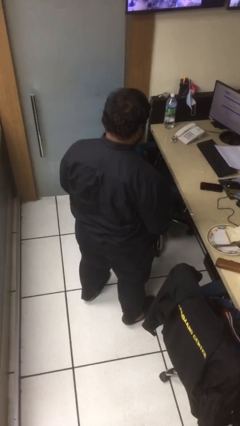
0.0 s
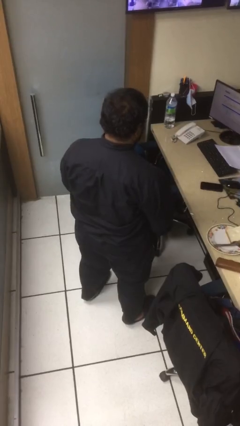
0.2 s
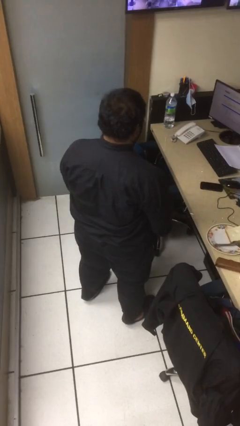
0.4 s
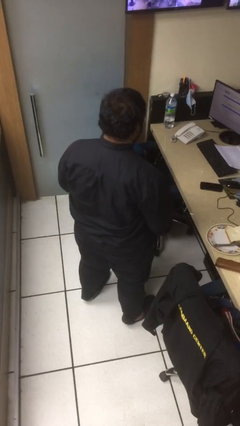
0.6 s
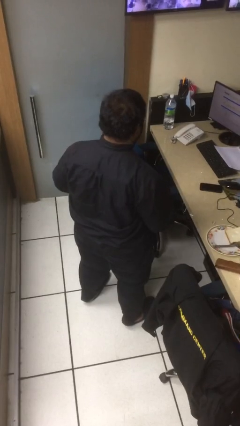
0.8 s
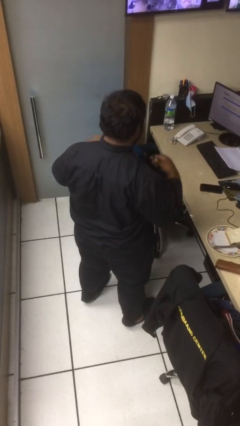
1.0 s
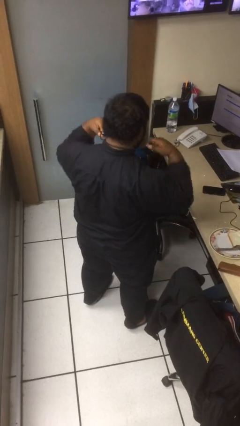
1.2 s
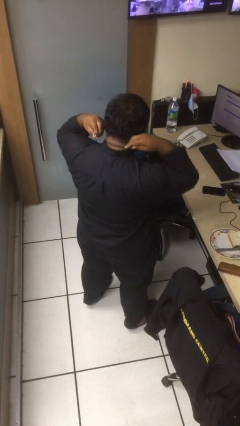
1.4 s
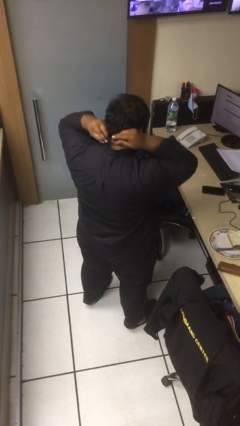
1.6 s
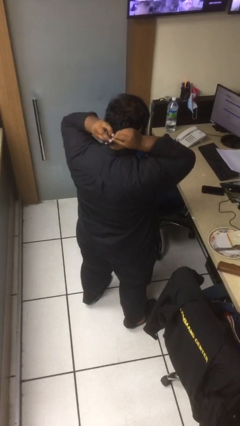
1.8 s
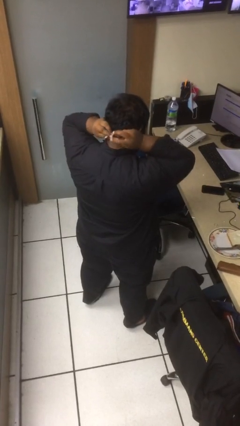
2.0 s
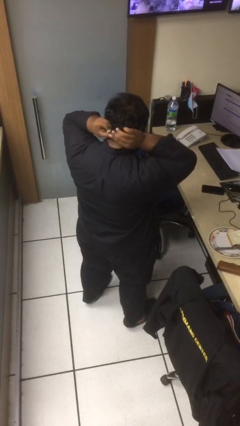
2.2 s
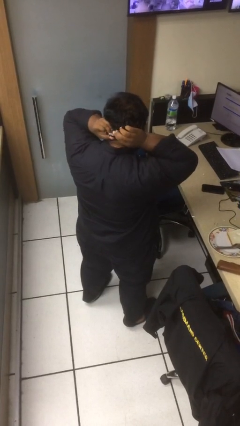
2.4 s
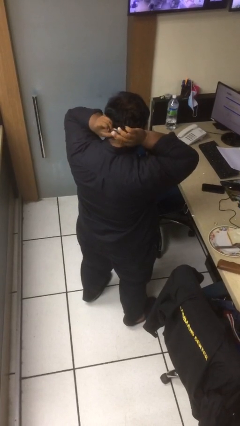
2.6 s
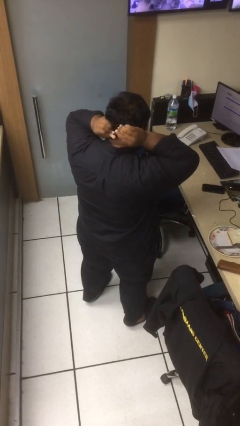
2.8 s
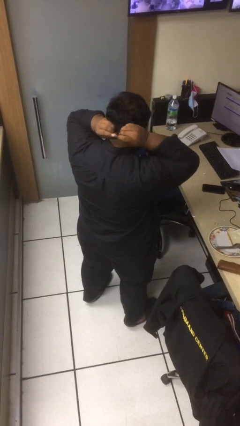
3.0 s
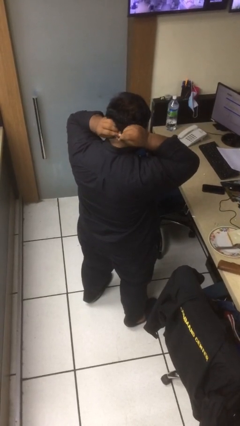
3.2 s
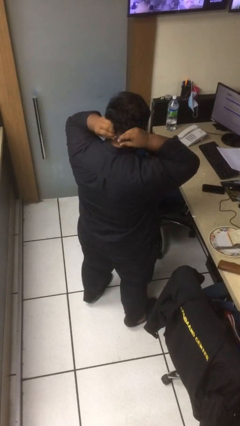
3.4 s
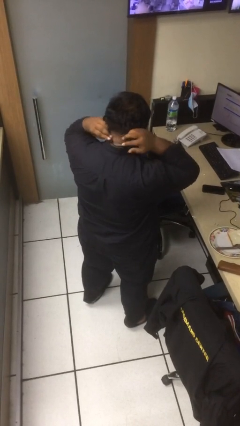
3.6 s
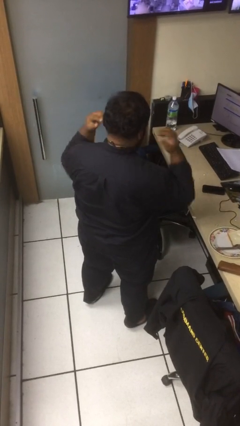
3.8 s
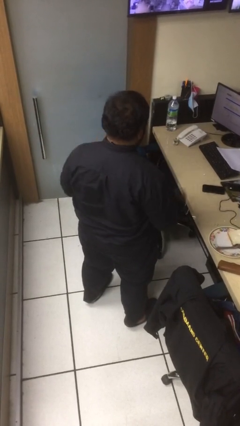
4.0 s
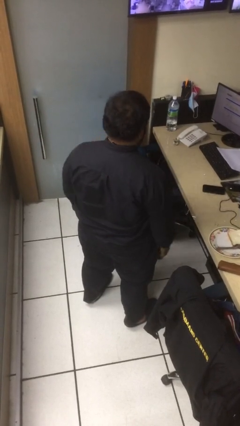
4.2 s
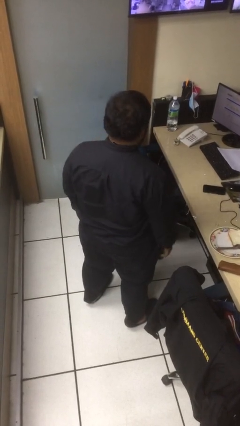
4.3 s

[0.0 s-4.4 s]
person puts on necklace

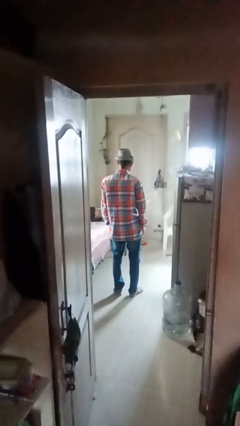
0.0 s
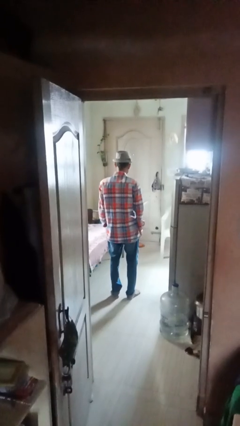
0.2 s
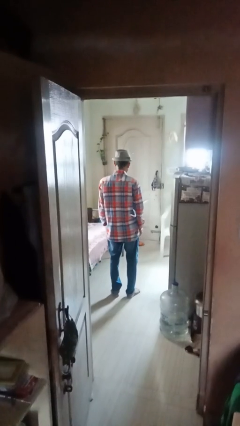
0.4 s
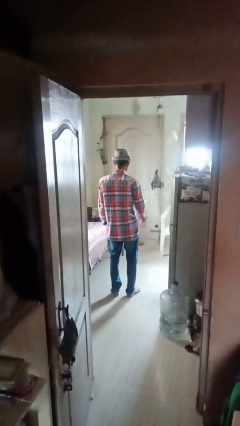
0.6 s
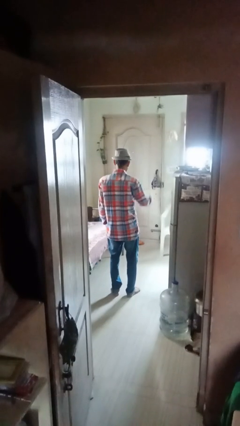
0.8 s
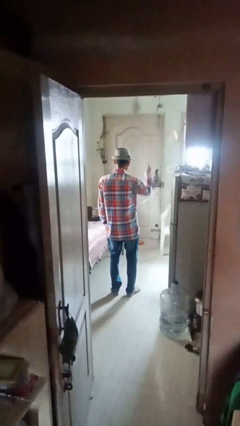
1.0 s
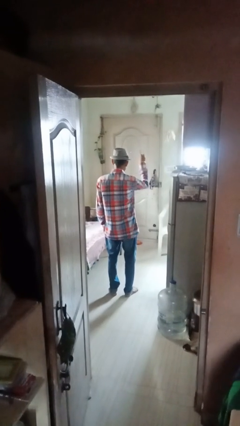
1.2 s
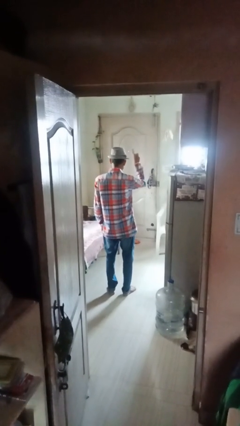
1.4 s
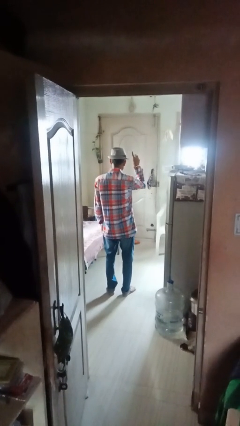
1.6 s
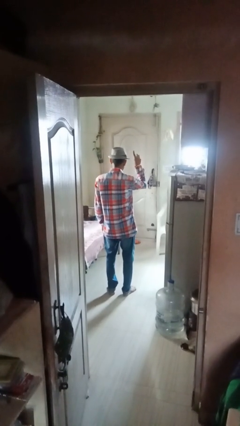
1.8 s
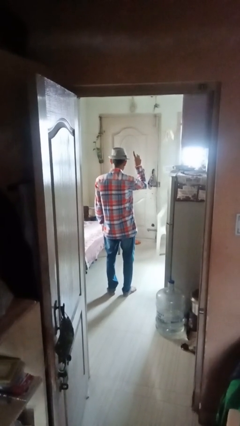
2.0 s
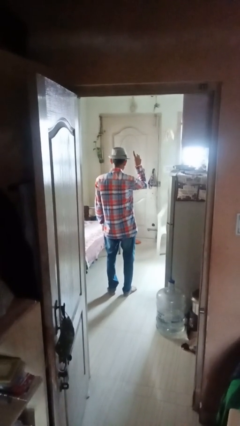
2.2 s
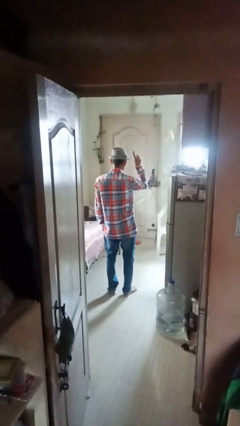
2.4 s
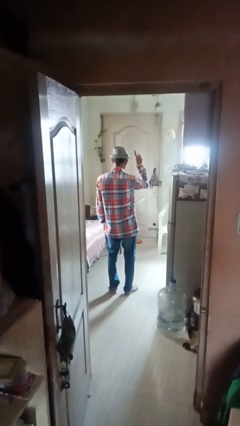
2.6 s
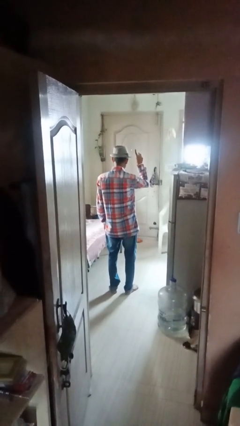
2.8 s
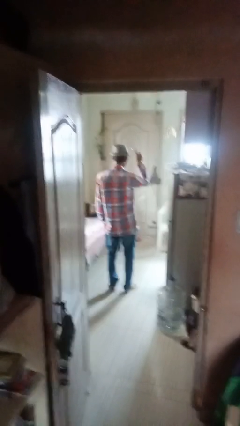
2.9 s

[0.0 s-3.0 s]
person gestures number one

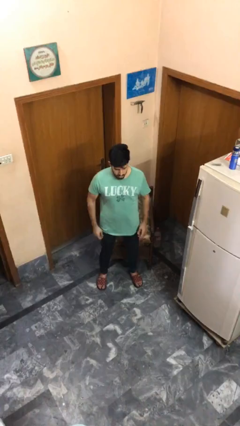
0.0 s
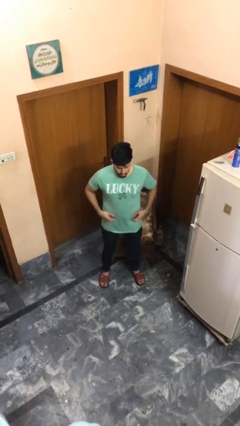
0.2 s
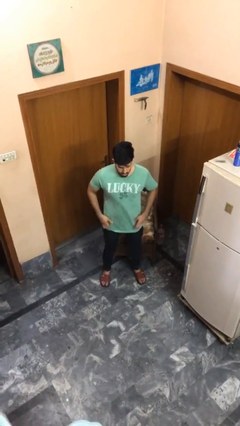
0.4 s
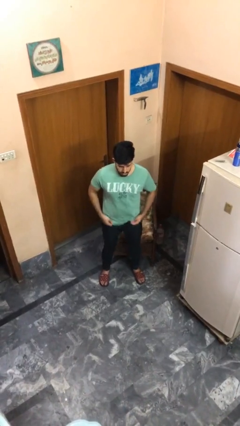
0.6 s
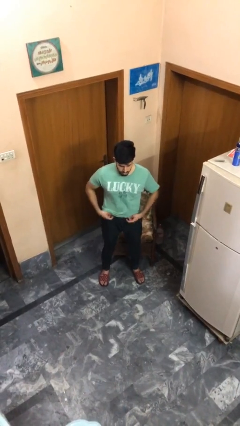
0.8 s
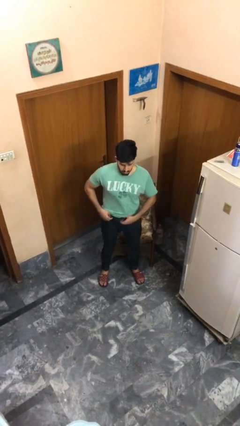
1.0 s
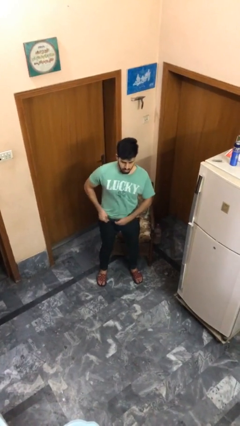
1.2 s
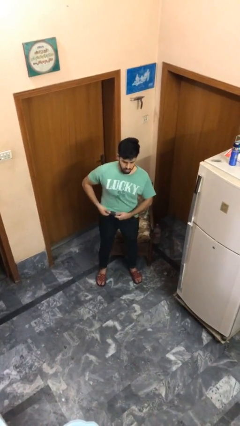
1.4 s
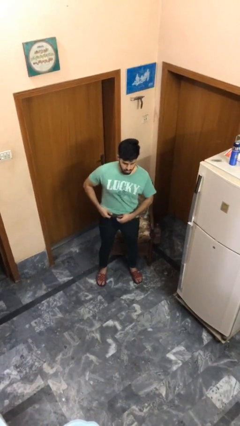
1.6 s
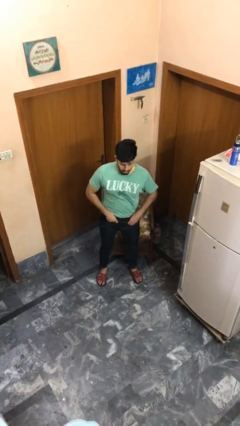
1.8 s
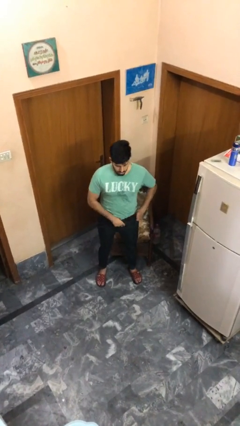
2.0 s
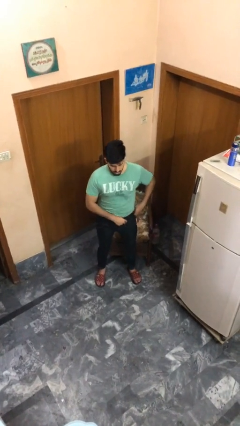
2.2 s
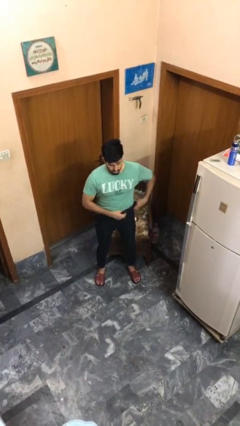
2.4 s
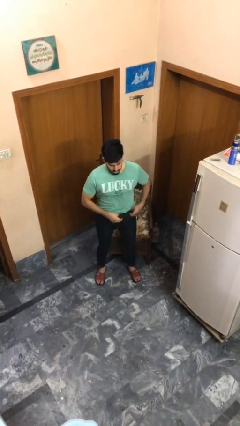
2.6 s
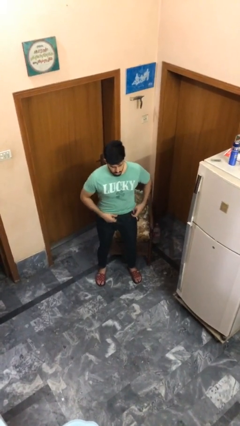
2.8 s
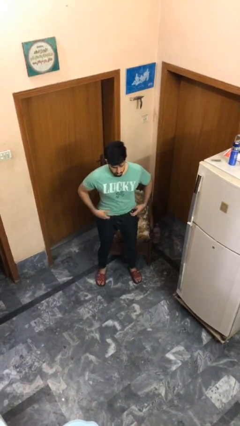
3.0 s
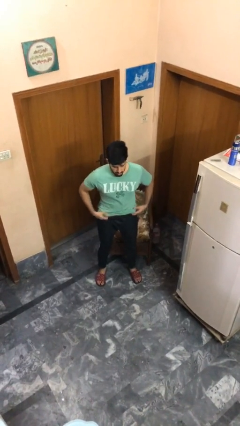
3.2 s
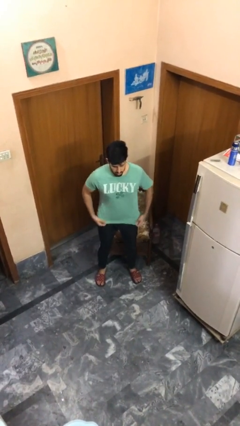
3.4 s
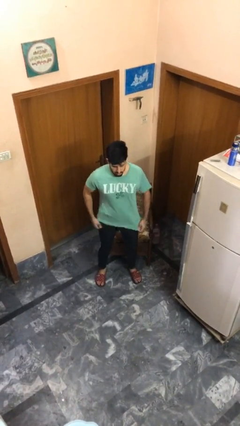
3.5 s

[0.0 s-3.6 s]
person hikes up pants

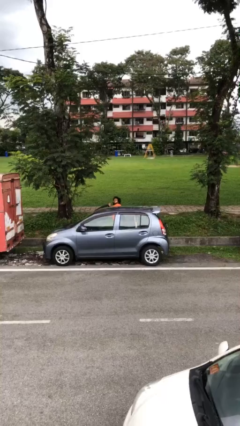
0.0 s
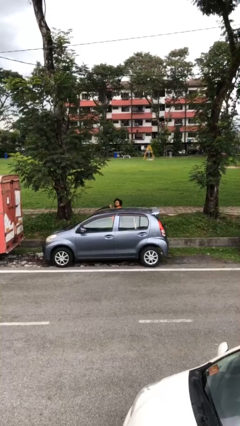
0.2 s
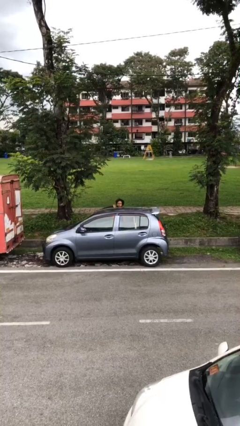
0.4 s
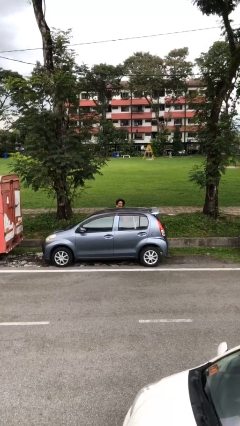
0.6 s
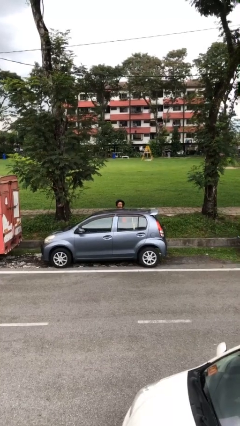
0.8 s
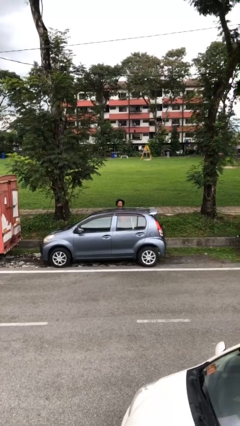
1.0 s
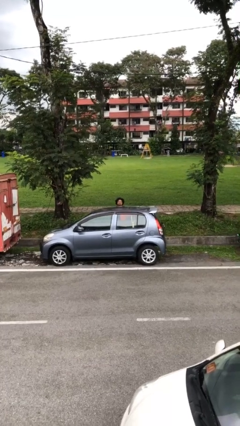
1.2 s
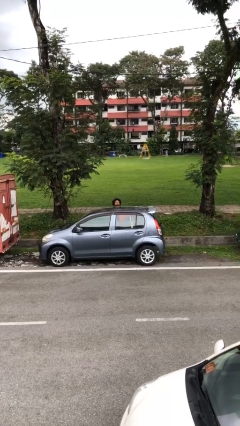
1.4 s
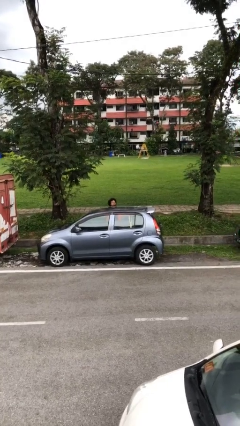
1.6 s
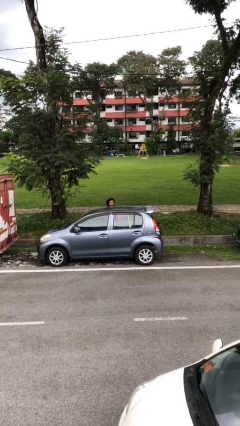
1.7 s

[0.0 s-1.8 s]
person closes car door

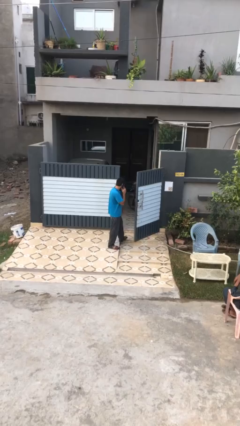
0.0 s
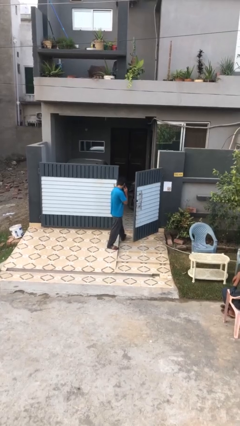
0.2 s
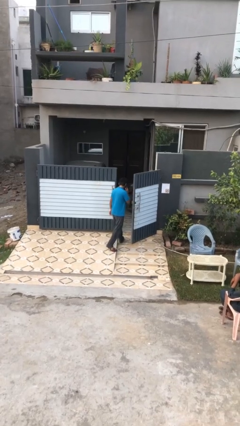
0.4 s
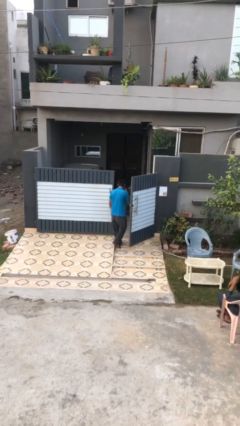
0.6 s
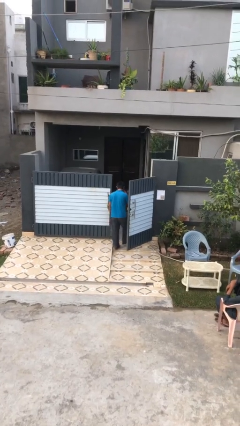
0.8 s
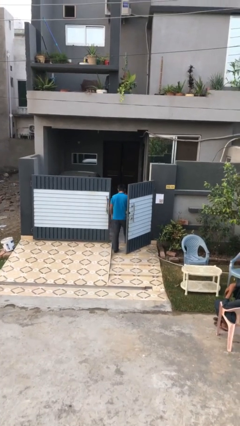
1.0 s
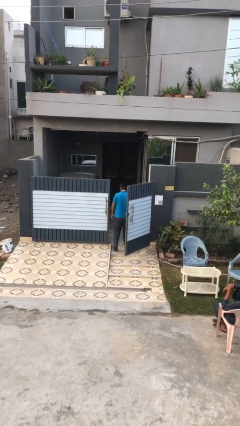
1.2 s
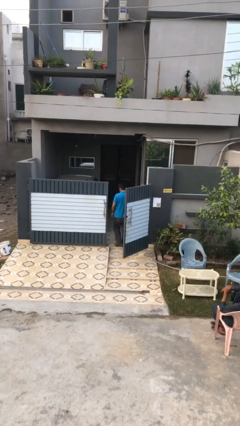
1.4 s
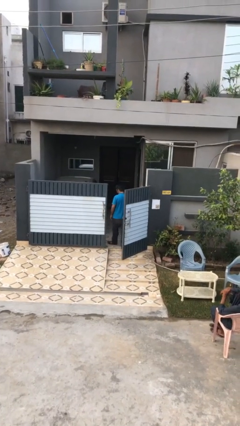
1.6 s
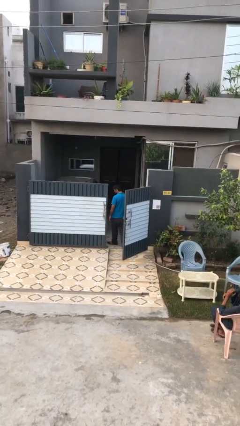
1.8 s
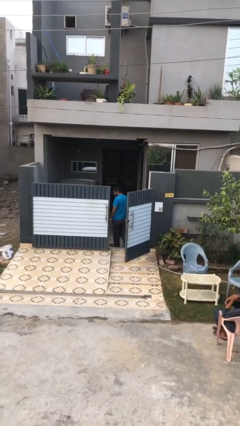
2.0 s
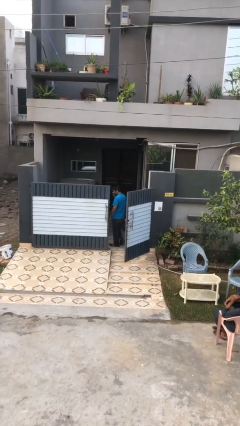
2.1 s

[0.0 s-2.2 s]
person exits scene through structure

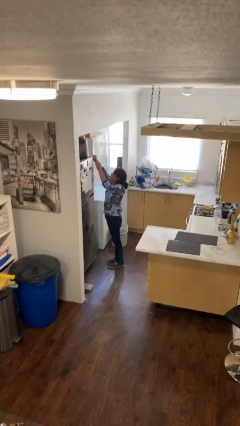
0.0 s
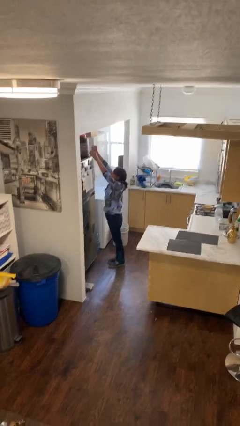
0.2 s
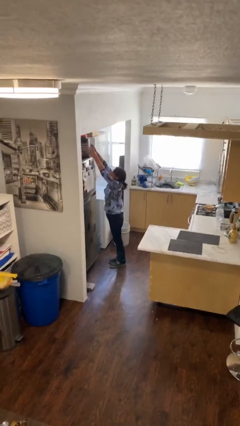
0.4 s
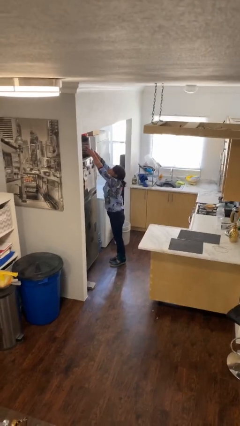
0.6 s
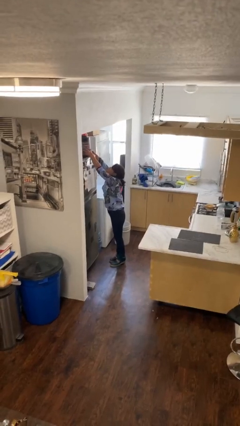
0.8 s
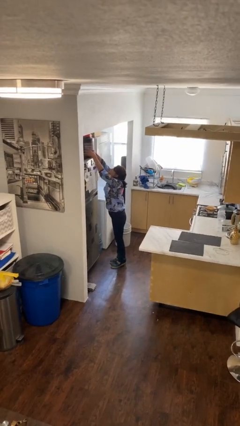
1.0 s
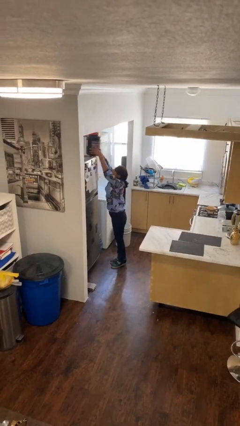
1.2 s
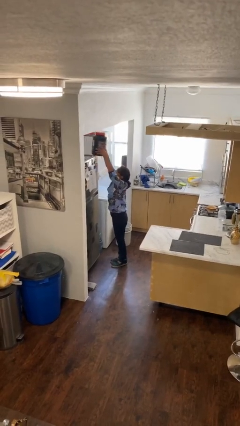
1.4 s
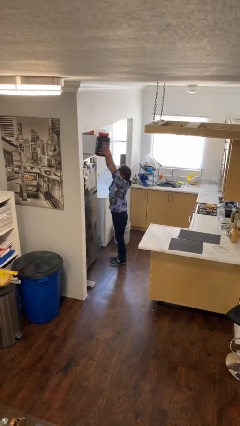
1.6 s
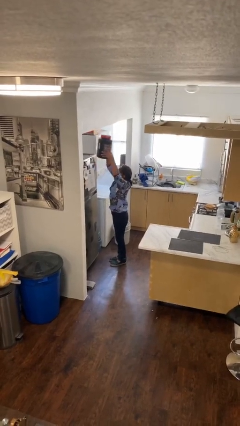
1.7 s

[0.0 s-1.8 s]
person picks up object from shelf

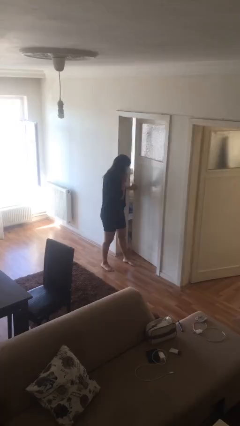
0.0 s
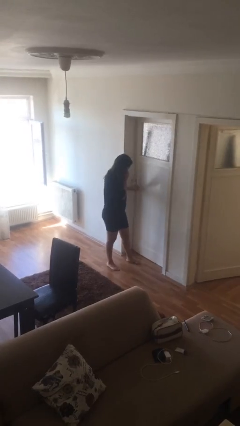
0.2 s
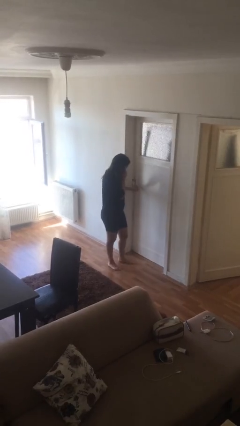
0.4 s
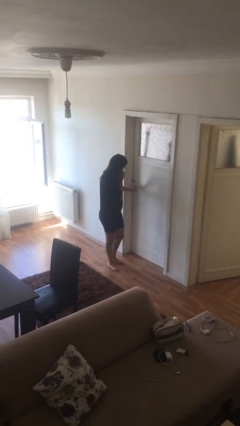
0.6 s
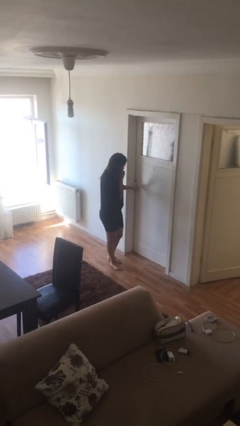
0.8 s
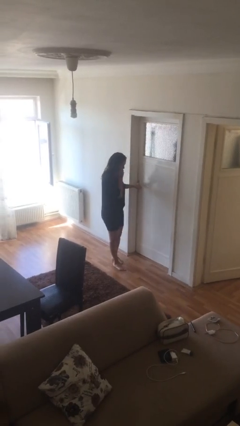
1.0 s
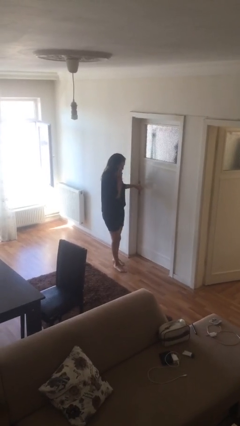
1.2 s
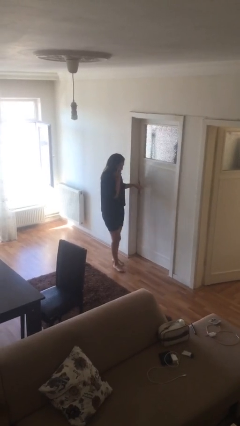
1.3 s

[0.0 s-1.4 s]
person closes facility door
